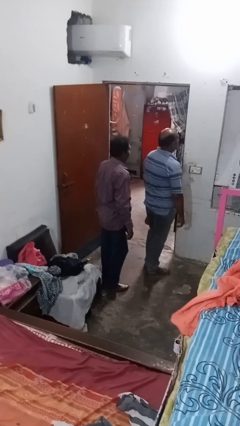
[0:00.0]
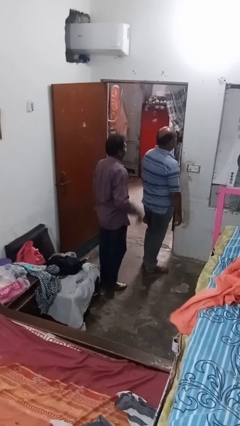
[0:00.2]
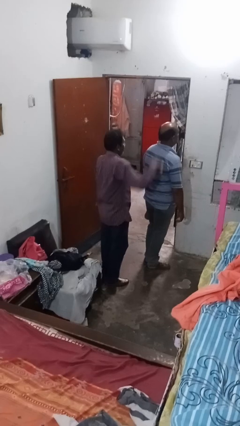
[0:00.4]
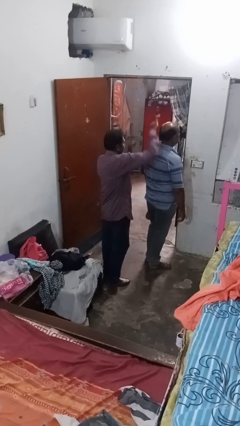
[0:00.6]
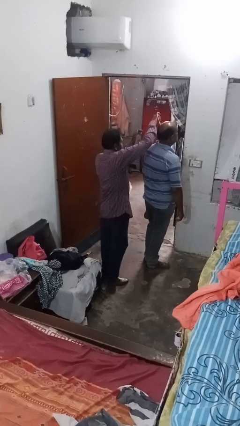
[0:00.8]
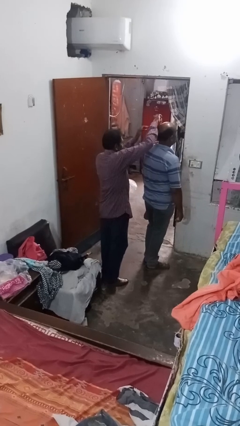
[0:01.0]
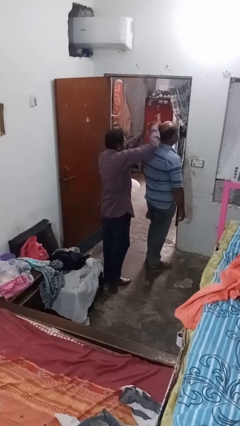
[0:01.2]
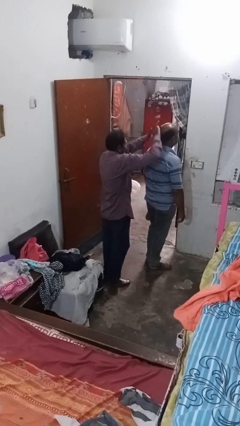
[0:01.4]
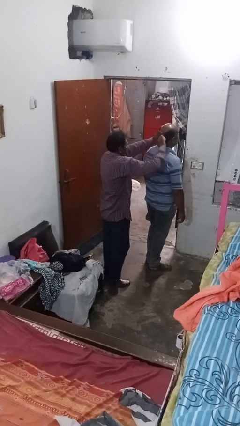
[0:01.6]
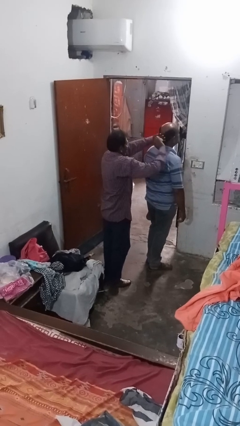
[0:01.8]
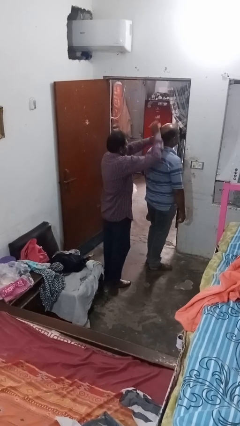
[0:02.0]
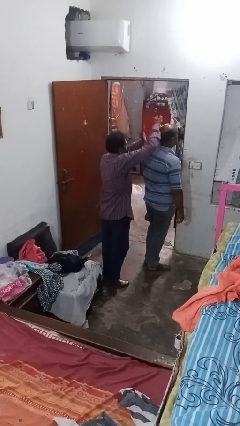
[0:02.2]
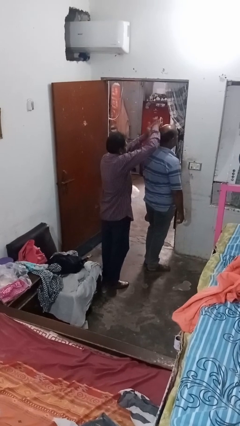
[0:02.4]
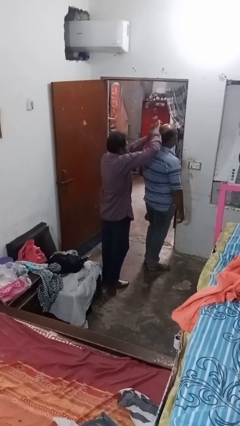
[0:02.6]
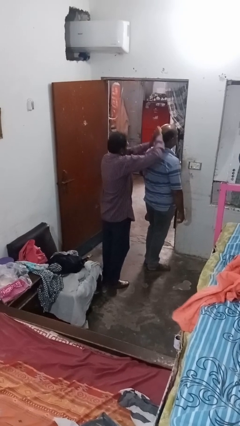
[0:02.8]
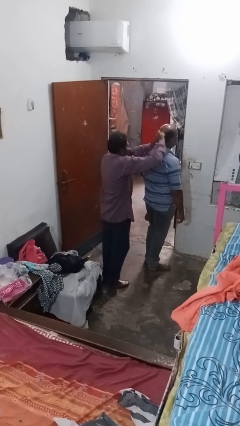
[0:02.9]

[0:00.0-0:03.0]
person brushes hair of person

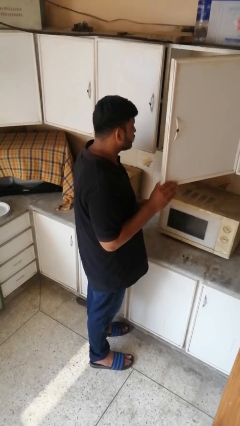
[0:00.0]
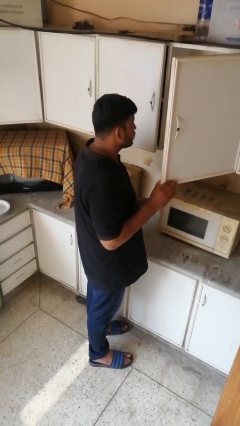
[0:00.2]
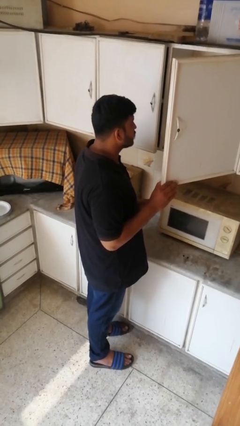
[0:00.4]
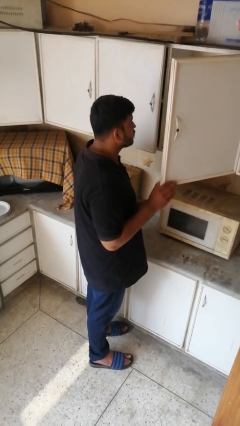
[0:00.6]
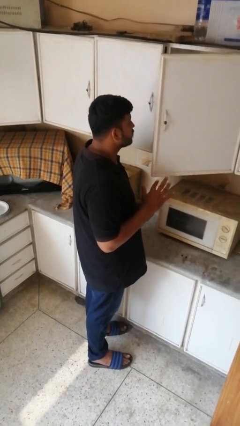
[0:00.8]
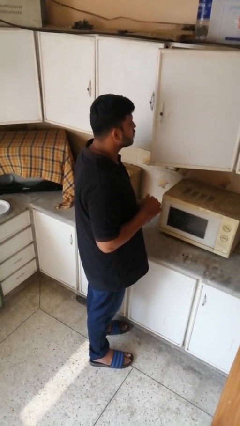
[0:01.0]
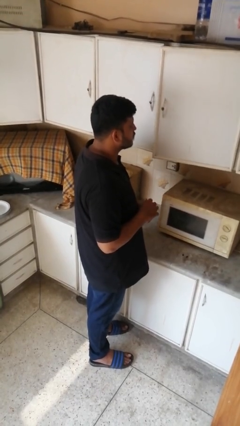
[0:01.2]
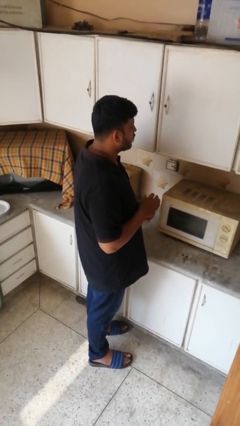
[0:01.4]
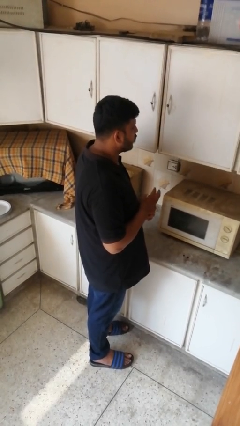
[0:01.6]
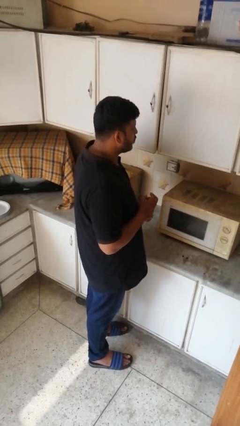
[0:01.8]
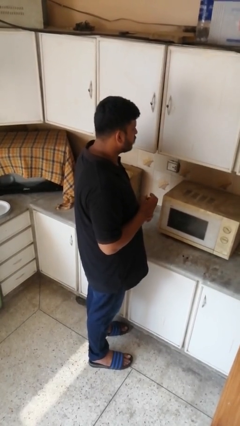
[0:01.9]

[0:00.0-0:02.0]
person closes cabinet

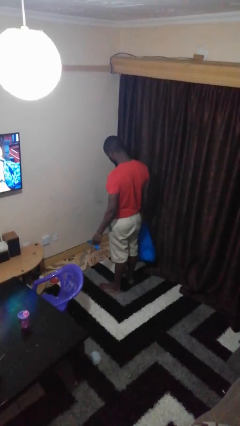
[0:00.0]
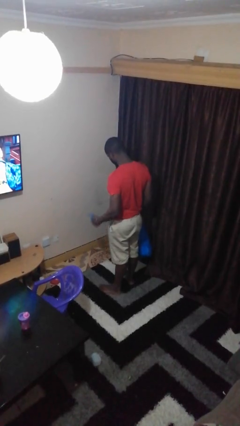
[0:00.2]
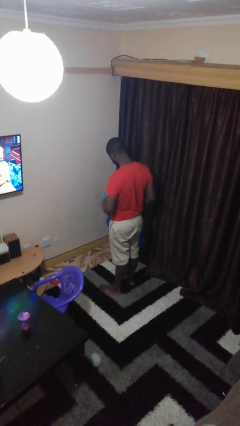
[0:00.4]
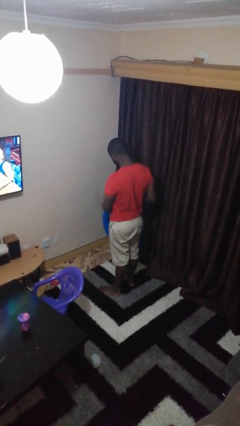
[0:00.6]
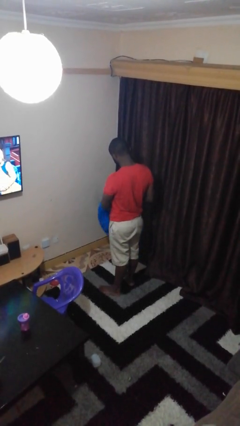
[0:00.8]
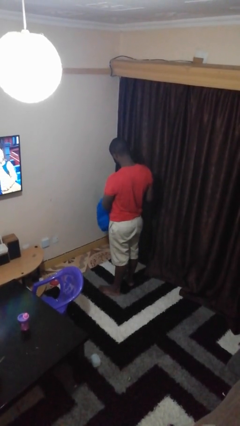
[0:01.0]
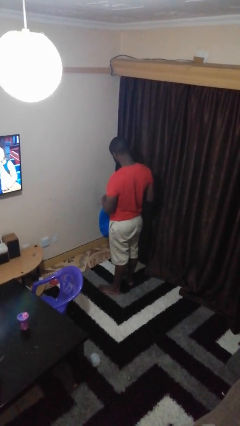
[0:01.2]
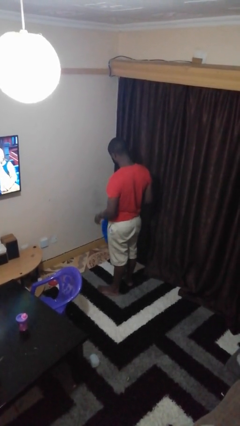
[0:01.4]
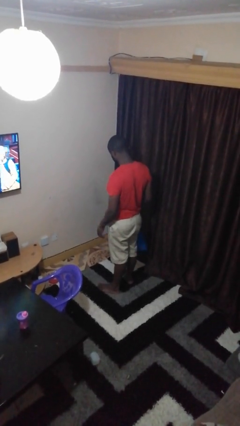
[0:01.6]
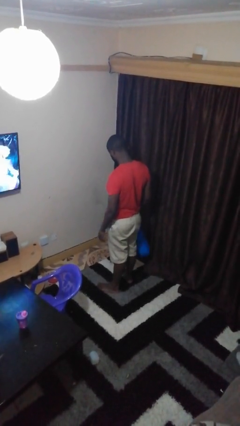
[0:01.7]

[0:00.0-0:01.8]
person puts object into bag

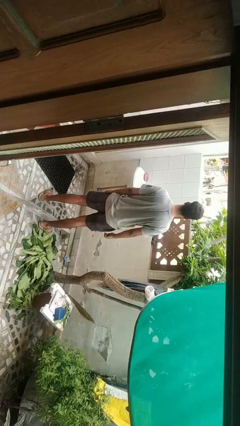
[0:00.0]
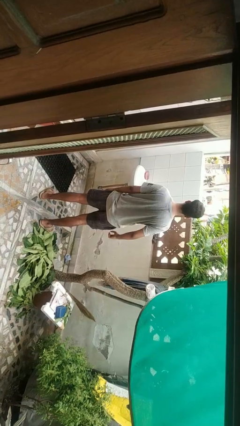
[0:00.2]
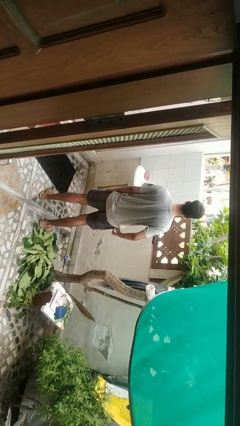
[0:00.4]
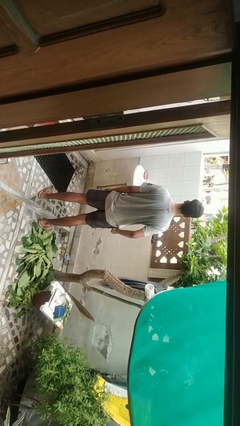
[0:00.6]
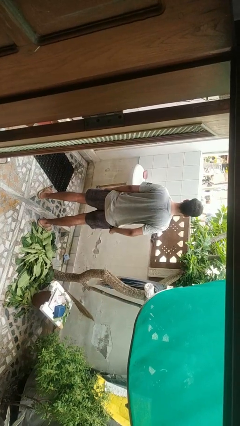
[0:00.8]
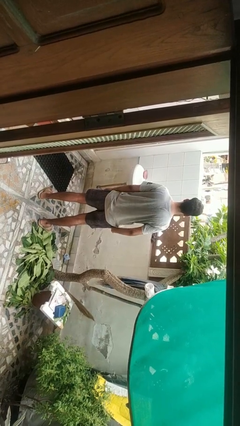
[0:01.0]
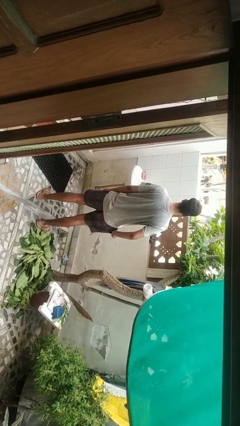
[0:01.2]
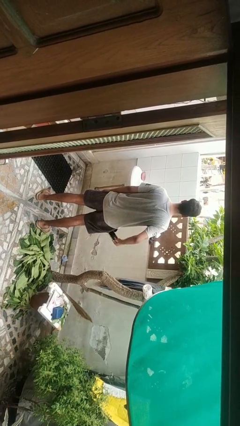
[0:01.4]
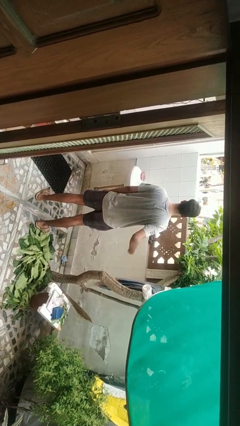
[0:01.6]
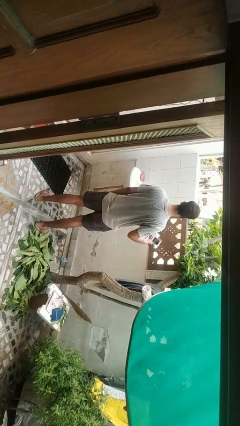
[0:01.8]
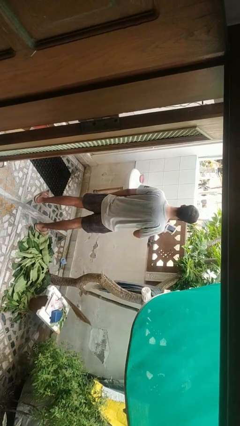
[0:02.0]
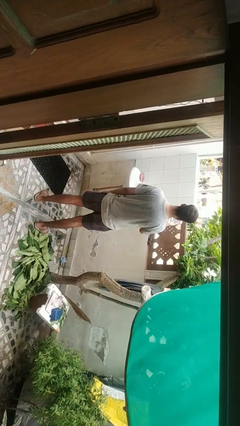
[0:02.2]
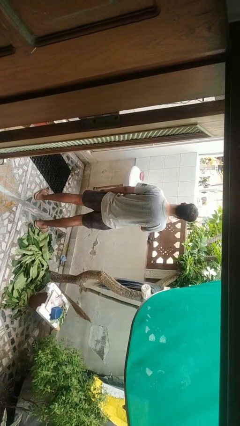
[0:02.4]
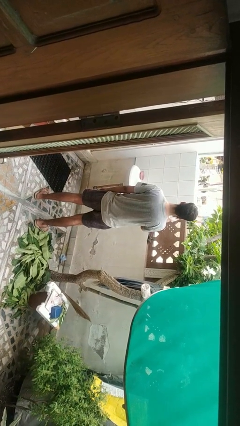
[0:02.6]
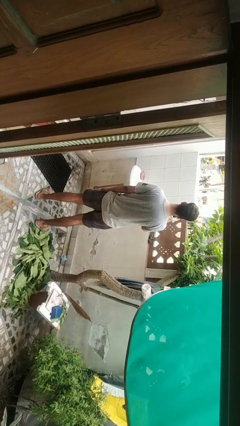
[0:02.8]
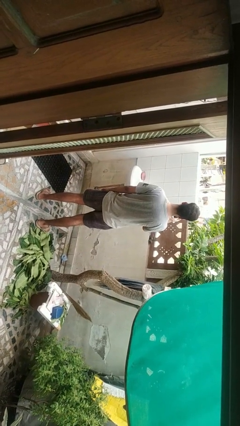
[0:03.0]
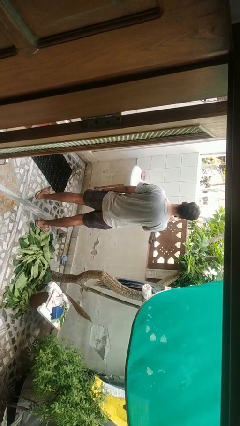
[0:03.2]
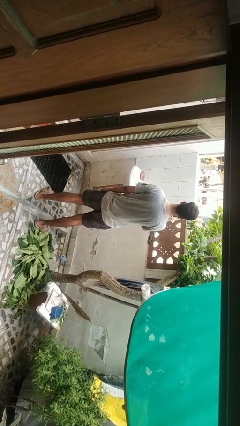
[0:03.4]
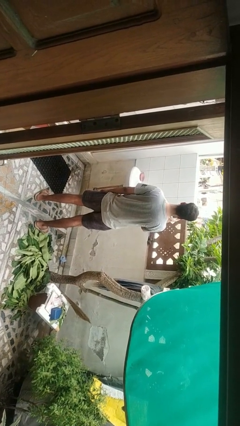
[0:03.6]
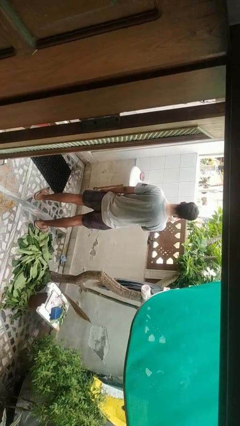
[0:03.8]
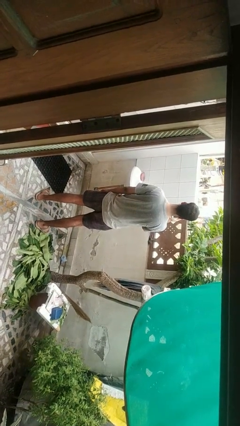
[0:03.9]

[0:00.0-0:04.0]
person takes phone from pocket

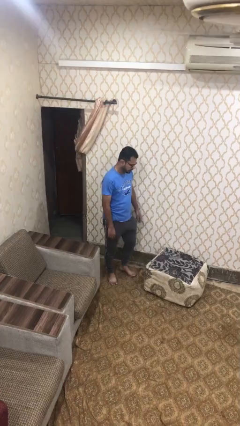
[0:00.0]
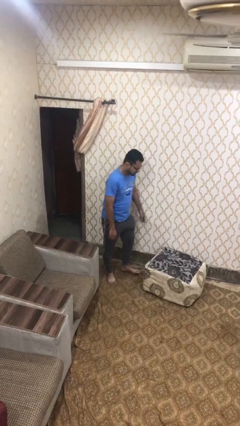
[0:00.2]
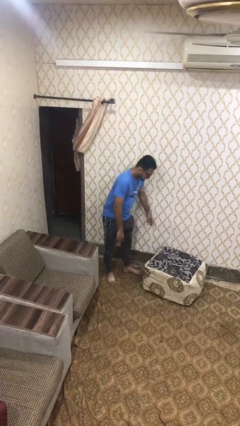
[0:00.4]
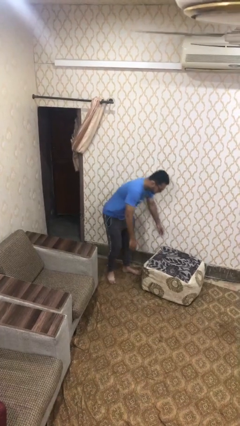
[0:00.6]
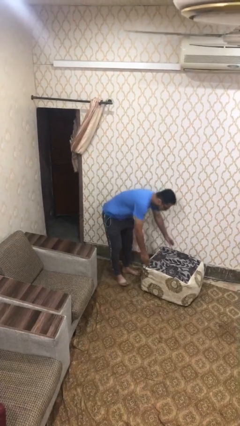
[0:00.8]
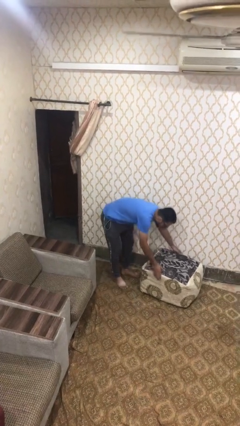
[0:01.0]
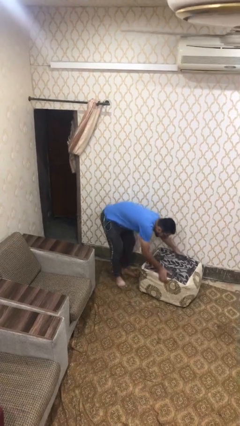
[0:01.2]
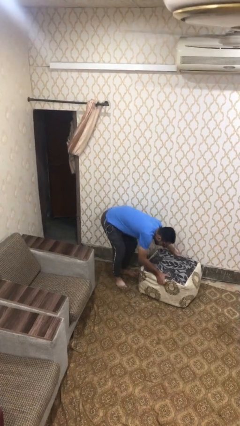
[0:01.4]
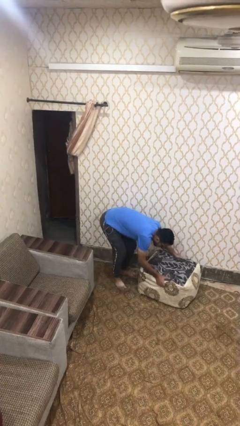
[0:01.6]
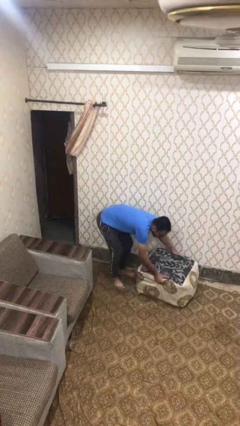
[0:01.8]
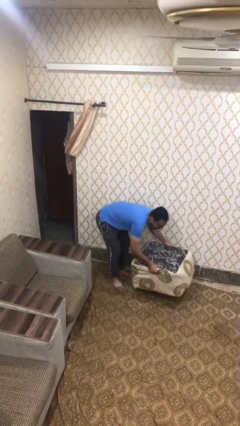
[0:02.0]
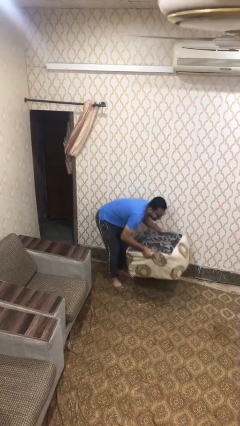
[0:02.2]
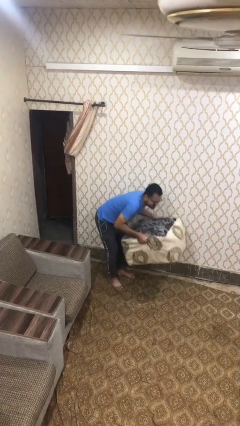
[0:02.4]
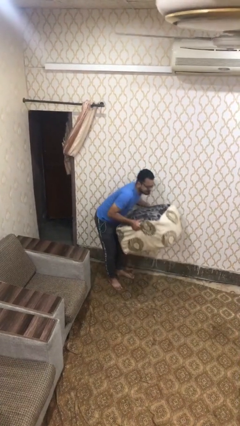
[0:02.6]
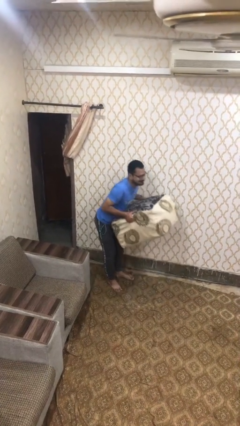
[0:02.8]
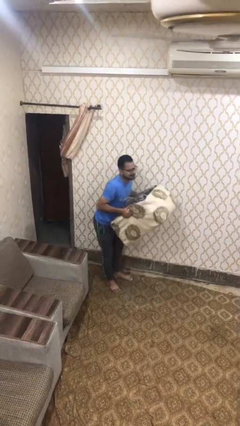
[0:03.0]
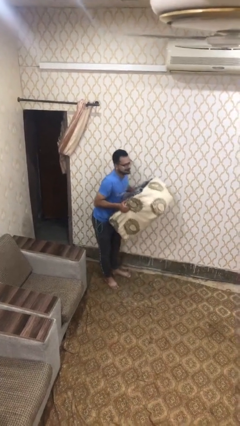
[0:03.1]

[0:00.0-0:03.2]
person picks up object from floor

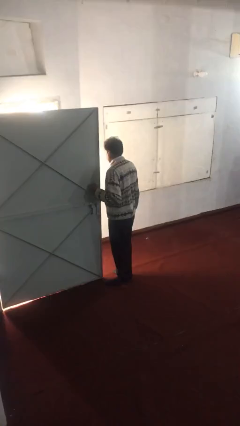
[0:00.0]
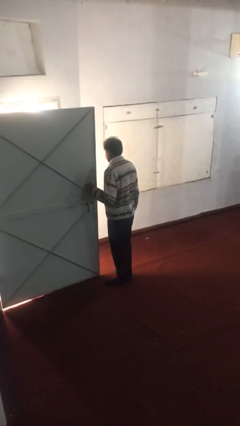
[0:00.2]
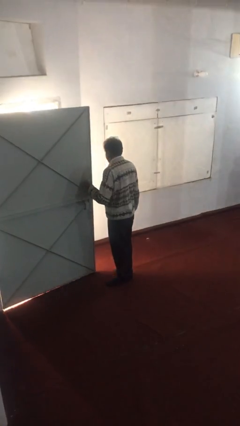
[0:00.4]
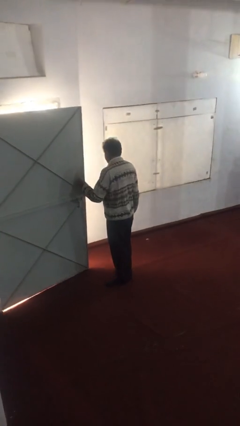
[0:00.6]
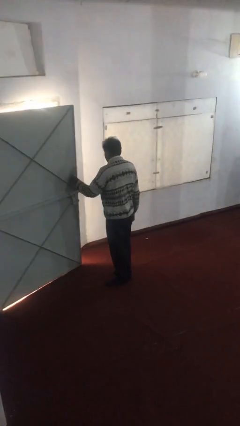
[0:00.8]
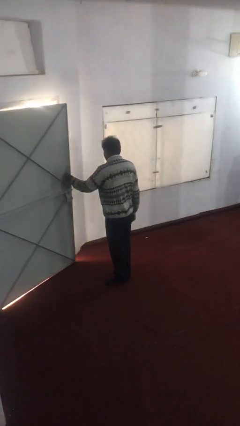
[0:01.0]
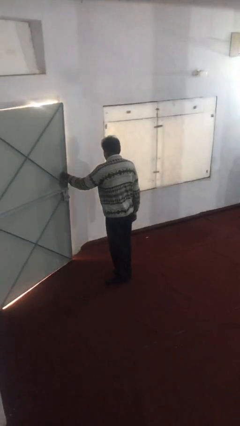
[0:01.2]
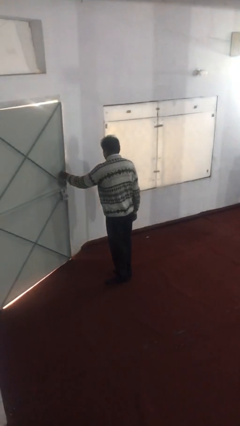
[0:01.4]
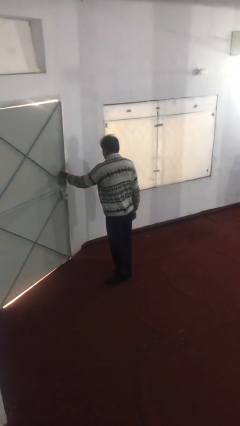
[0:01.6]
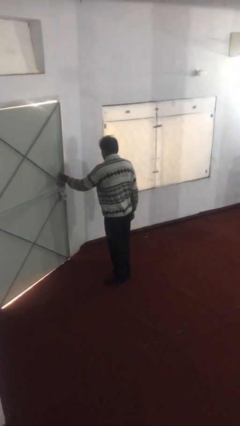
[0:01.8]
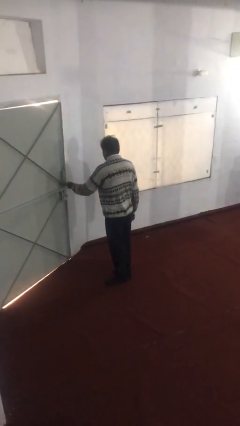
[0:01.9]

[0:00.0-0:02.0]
person closes facility door

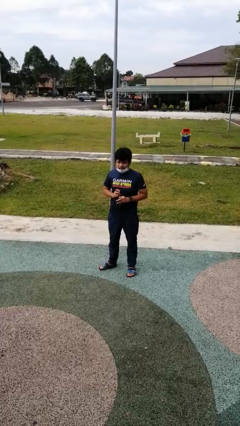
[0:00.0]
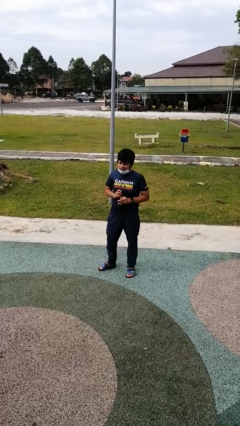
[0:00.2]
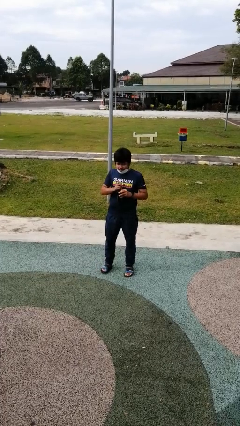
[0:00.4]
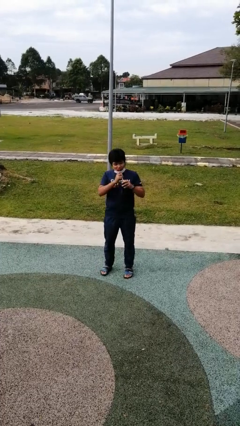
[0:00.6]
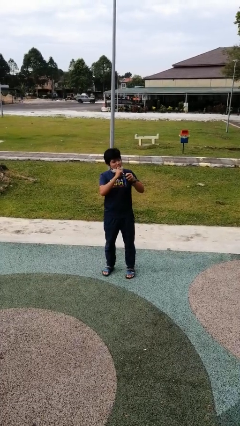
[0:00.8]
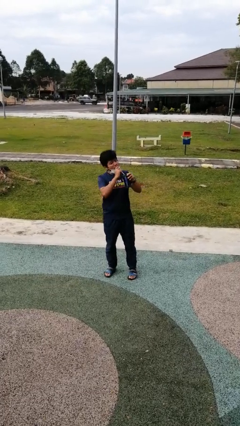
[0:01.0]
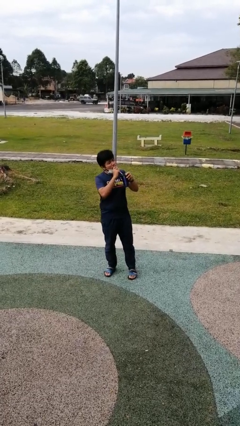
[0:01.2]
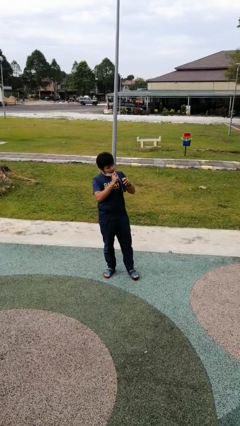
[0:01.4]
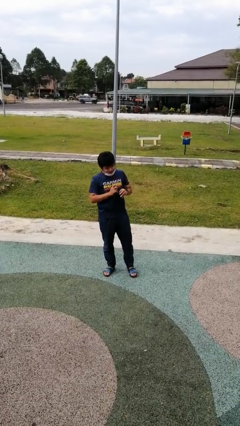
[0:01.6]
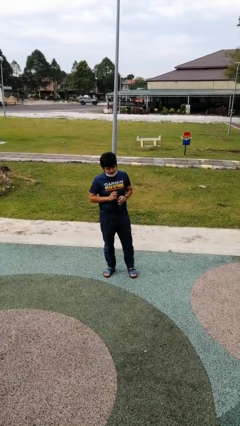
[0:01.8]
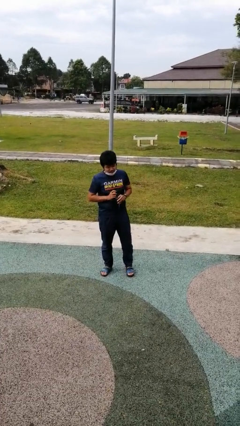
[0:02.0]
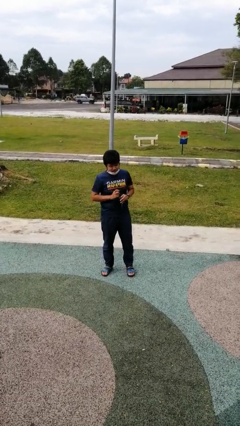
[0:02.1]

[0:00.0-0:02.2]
person drinks from straw
